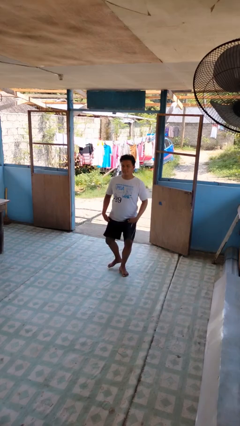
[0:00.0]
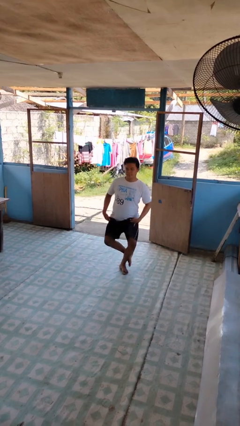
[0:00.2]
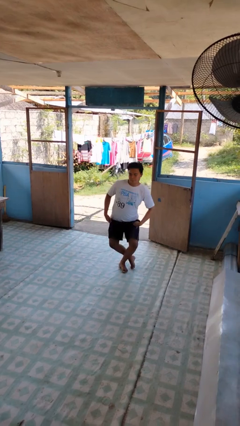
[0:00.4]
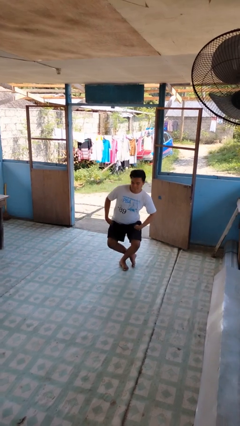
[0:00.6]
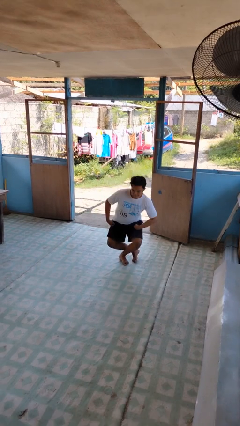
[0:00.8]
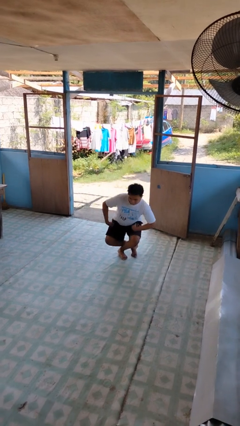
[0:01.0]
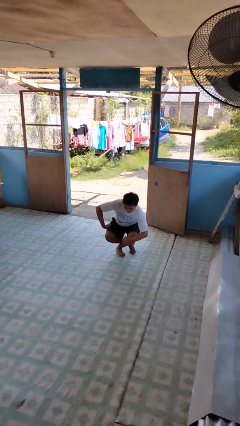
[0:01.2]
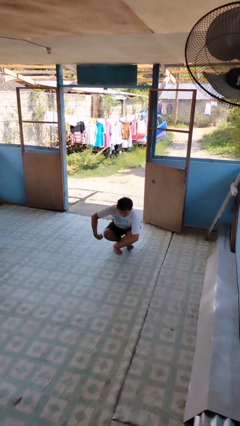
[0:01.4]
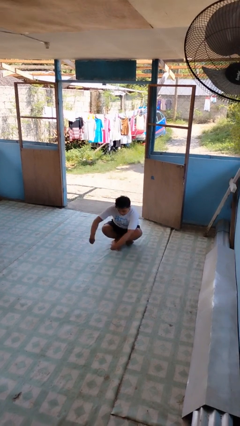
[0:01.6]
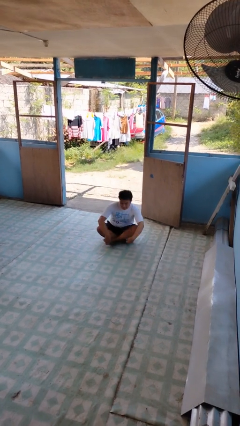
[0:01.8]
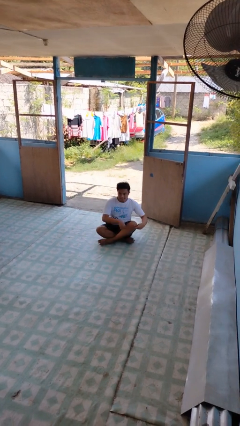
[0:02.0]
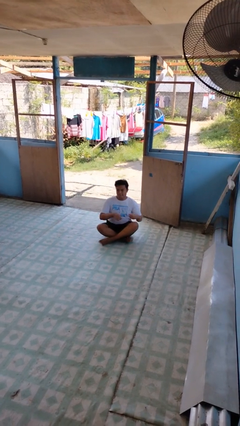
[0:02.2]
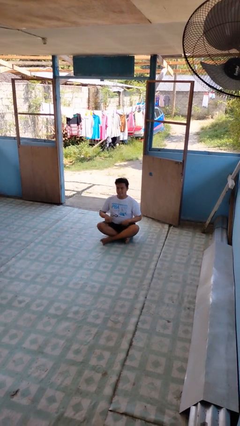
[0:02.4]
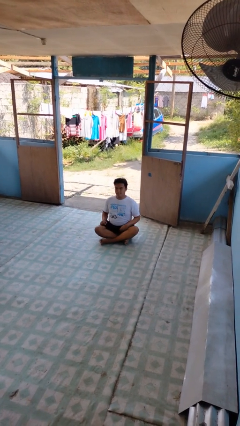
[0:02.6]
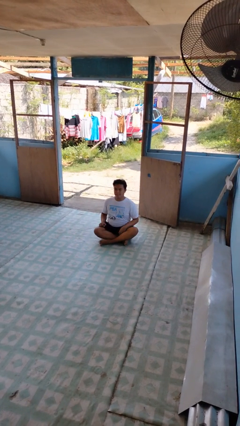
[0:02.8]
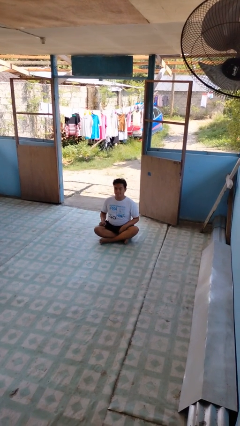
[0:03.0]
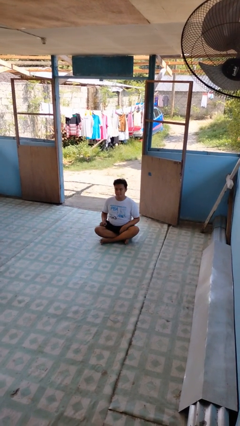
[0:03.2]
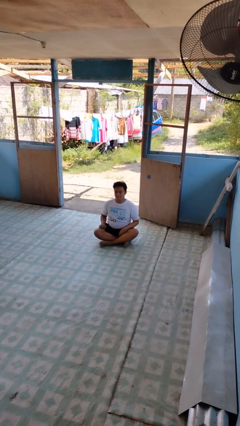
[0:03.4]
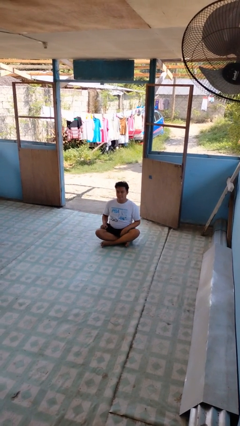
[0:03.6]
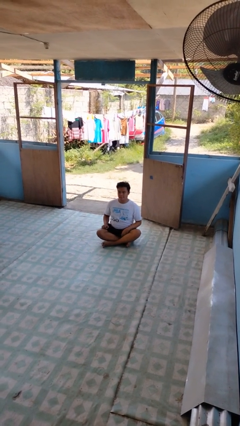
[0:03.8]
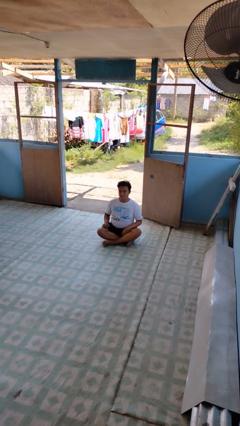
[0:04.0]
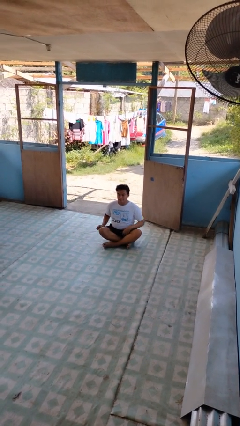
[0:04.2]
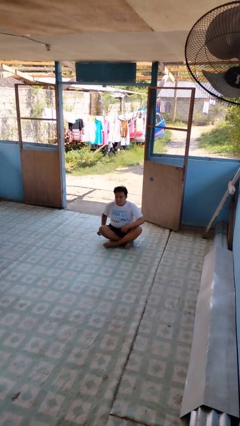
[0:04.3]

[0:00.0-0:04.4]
person sits crisscross

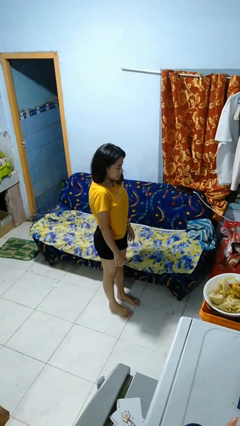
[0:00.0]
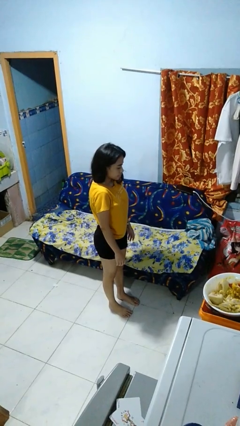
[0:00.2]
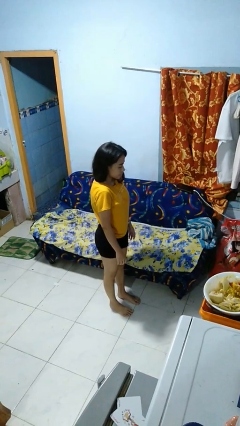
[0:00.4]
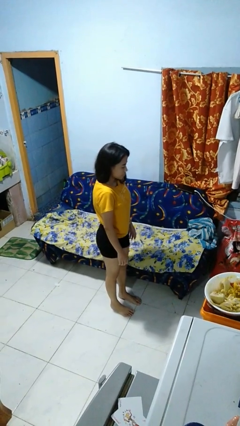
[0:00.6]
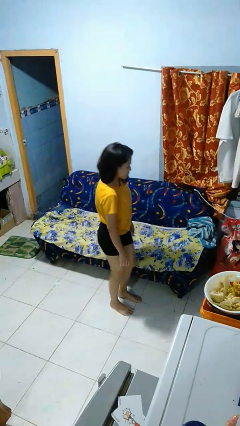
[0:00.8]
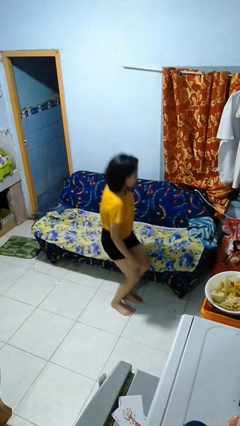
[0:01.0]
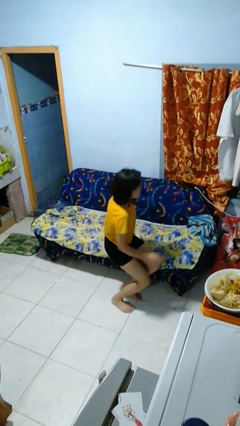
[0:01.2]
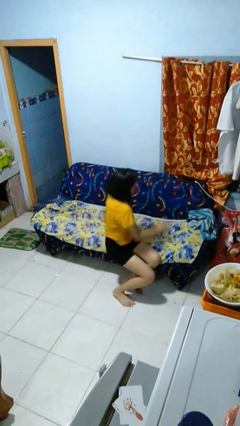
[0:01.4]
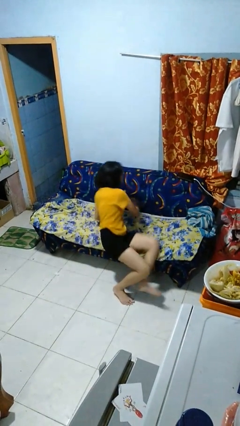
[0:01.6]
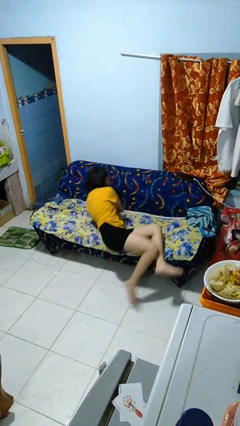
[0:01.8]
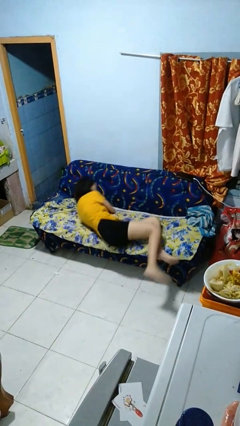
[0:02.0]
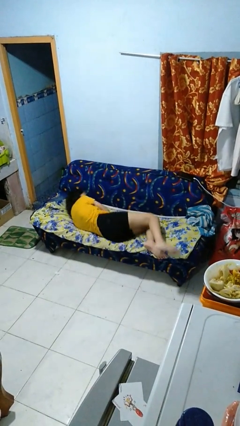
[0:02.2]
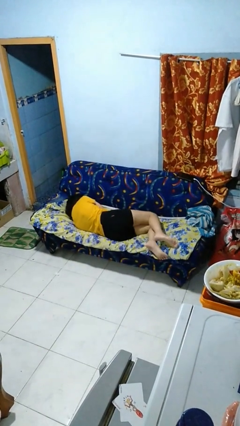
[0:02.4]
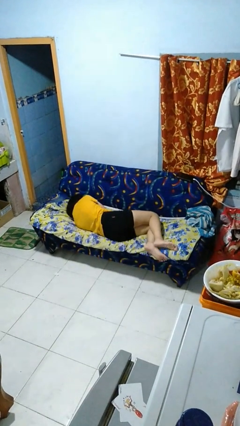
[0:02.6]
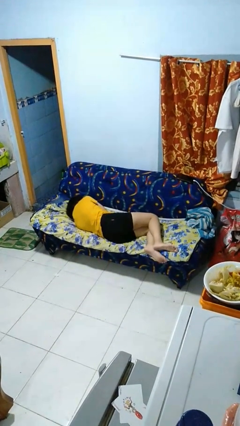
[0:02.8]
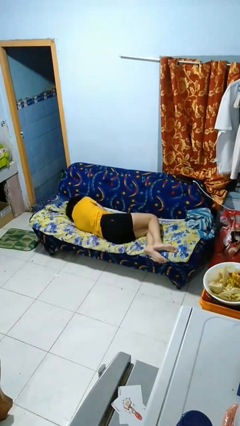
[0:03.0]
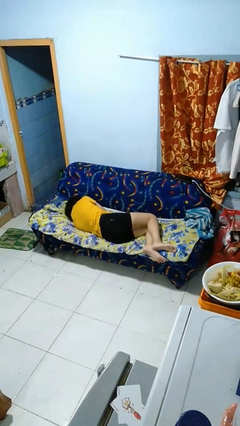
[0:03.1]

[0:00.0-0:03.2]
person lies down on couch

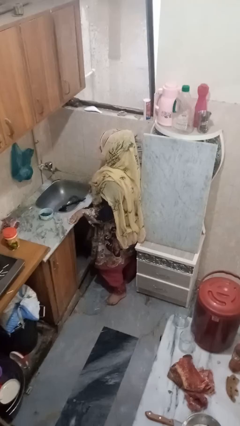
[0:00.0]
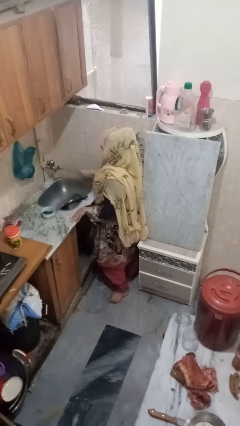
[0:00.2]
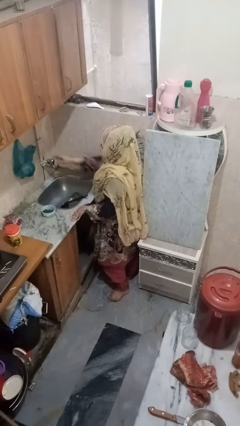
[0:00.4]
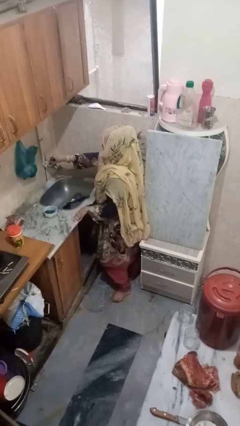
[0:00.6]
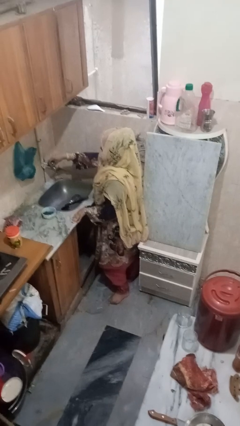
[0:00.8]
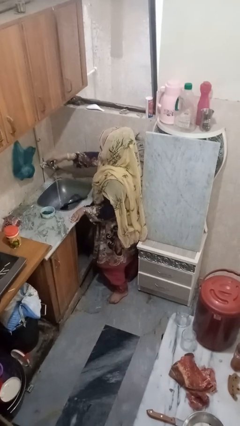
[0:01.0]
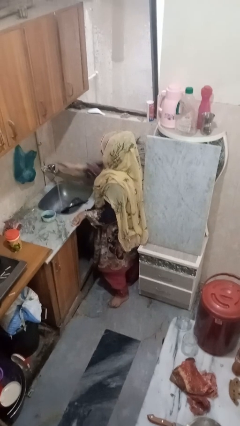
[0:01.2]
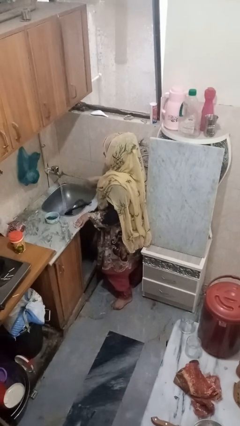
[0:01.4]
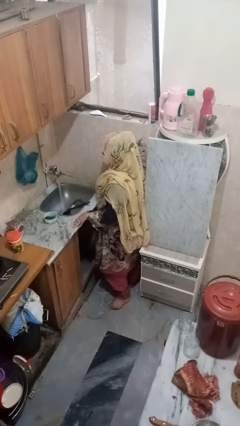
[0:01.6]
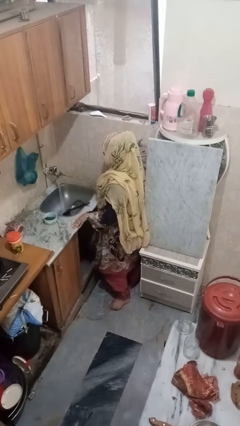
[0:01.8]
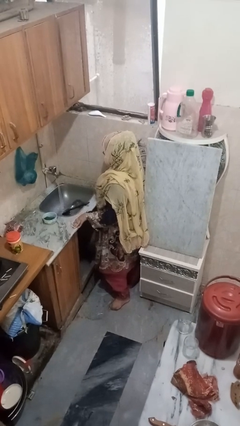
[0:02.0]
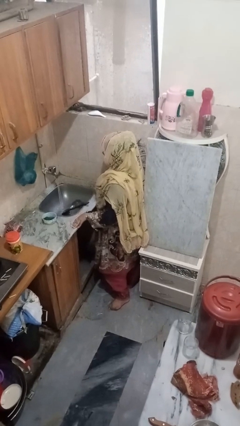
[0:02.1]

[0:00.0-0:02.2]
person turns on faucet

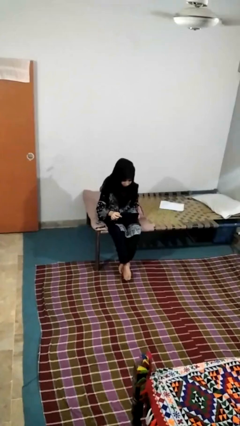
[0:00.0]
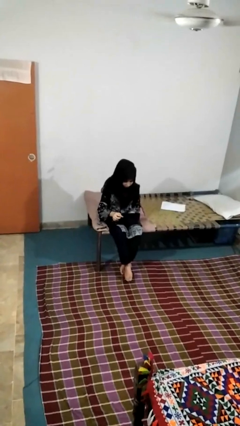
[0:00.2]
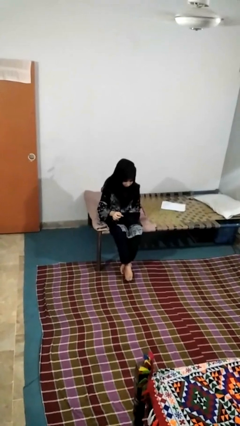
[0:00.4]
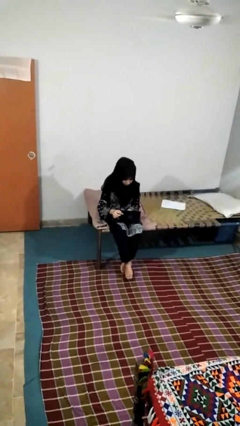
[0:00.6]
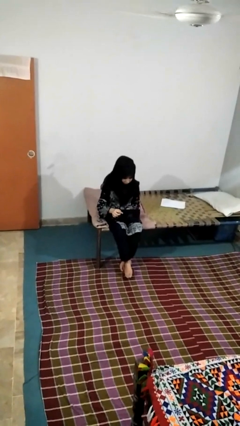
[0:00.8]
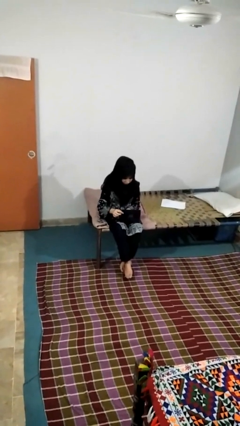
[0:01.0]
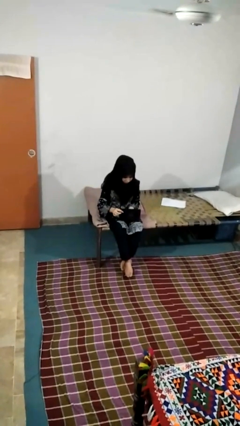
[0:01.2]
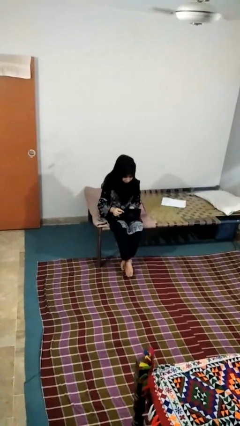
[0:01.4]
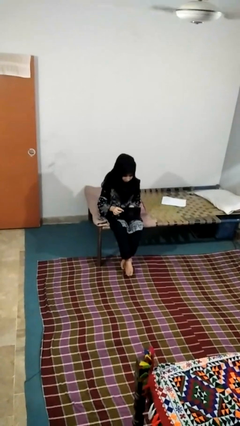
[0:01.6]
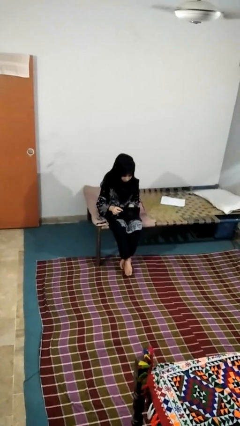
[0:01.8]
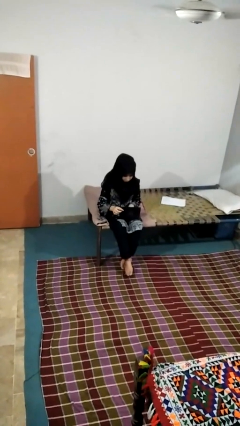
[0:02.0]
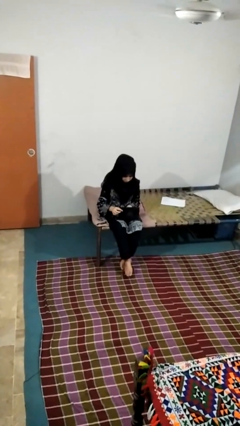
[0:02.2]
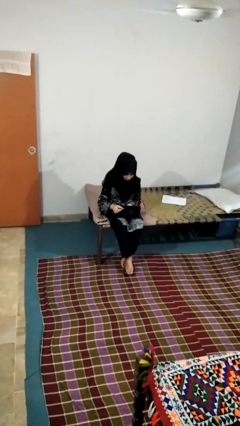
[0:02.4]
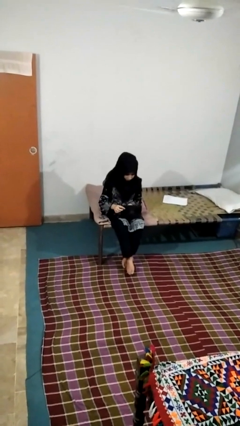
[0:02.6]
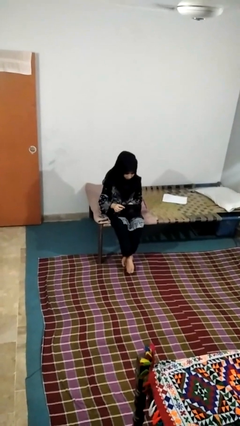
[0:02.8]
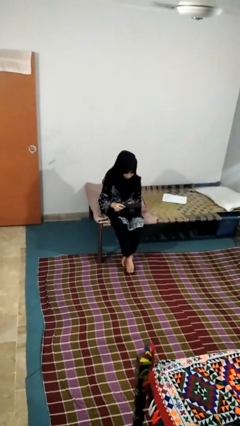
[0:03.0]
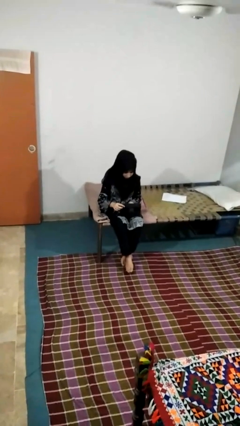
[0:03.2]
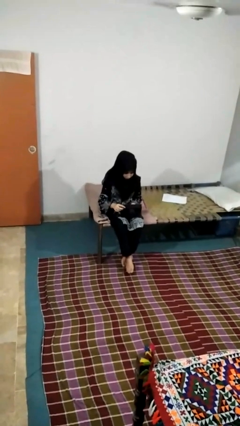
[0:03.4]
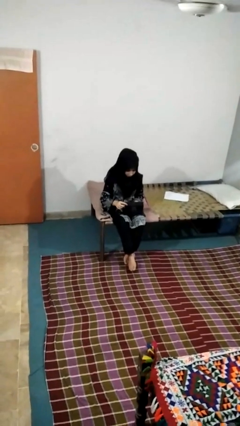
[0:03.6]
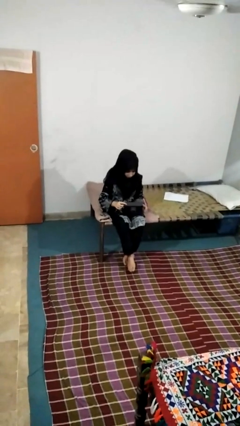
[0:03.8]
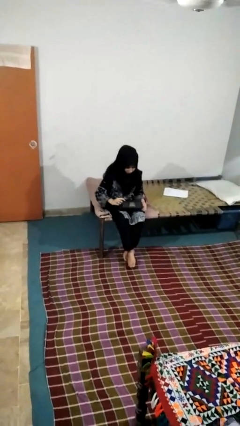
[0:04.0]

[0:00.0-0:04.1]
person searches jewelry box

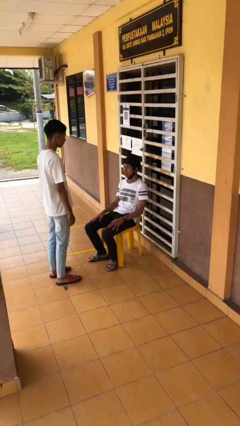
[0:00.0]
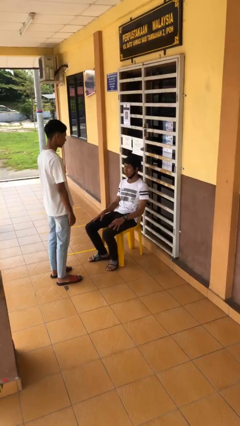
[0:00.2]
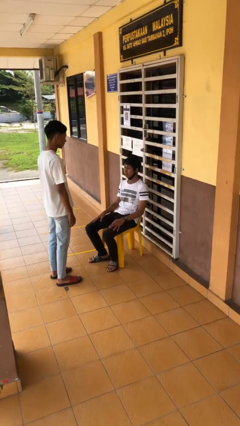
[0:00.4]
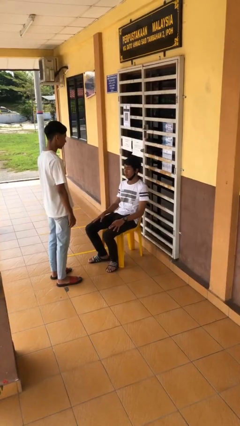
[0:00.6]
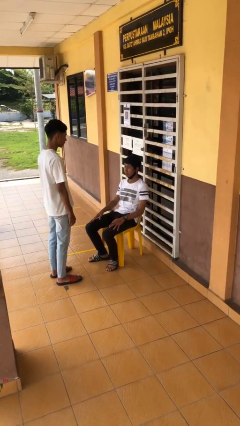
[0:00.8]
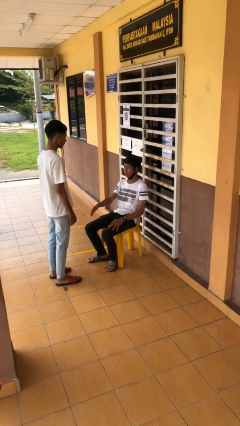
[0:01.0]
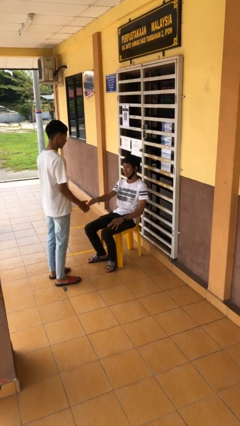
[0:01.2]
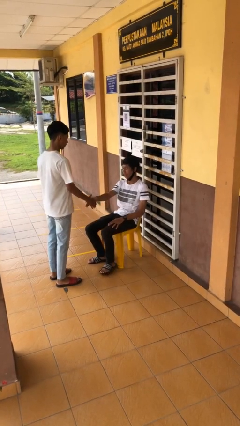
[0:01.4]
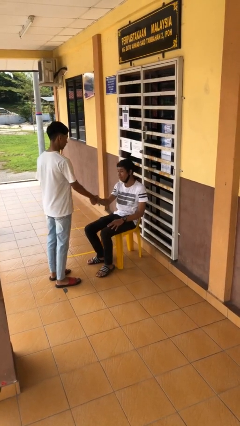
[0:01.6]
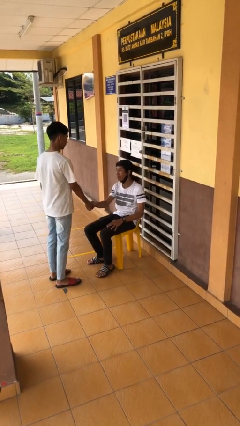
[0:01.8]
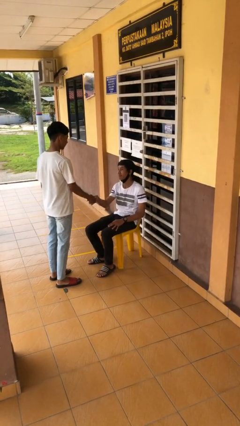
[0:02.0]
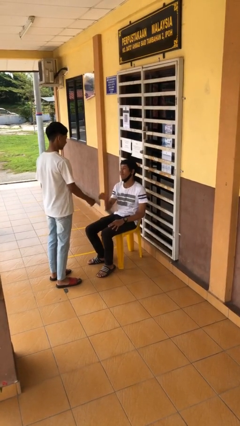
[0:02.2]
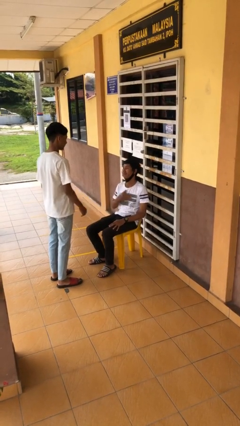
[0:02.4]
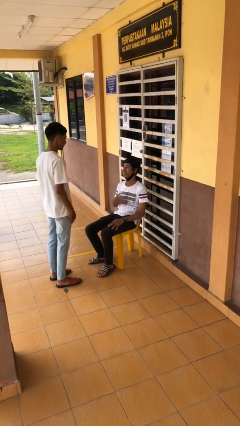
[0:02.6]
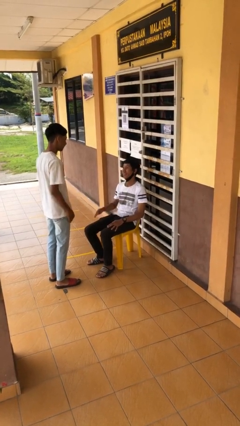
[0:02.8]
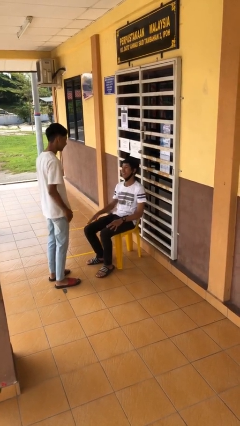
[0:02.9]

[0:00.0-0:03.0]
person shakes hand

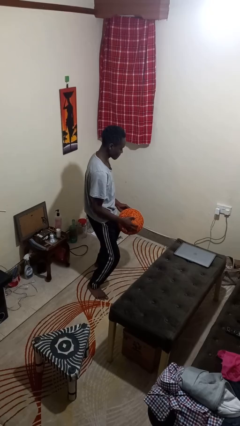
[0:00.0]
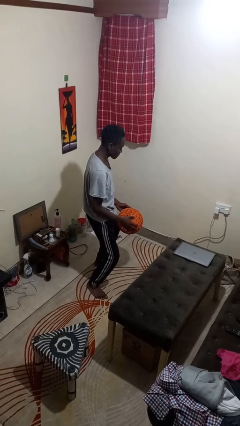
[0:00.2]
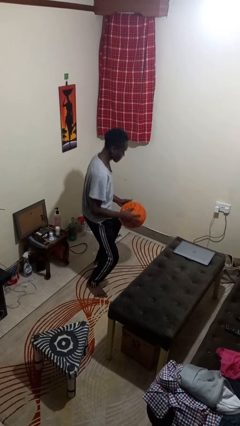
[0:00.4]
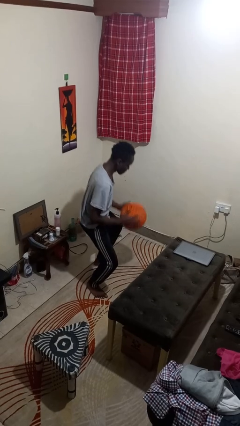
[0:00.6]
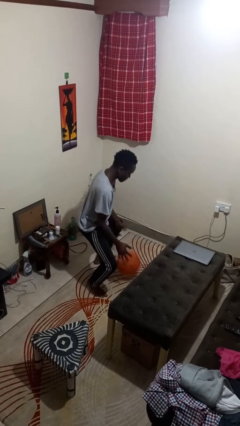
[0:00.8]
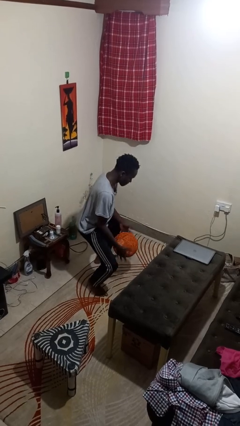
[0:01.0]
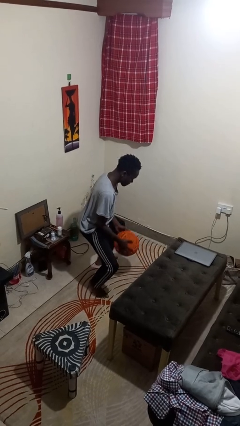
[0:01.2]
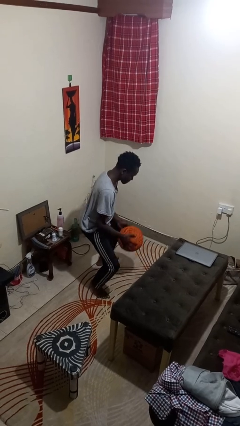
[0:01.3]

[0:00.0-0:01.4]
person bounces ball on floor
